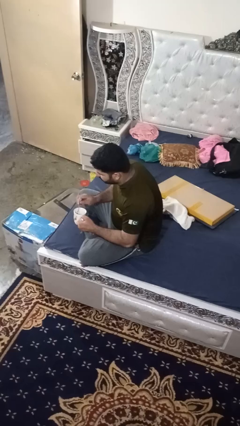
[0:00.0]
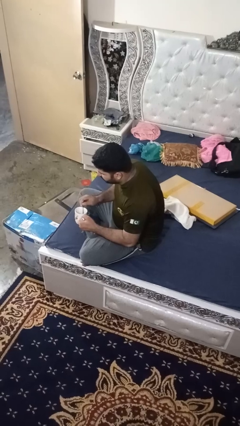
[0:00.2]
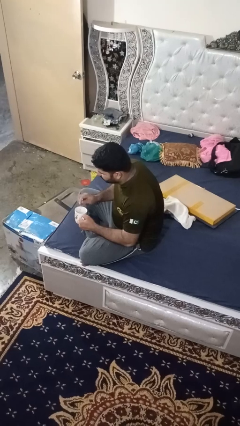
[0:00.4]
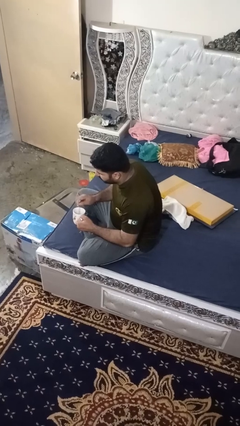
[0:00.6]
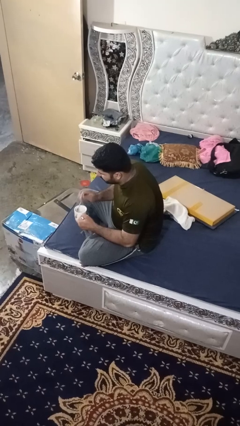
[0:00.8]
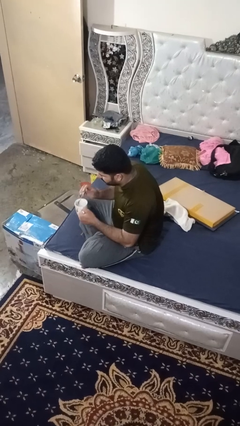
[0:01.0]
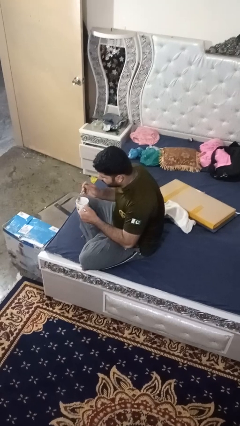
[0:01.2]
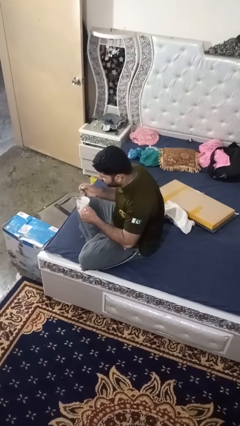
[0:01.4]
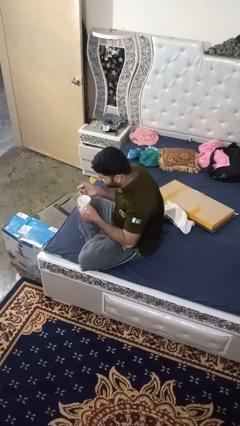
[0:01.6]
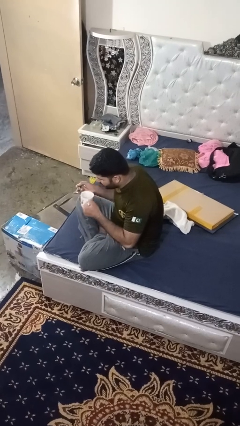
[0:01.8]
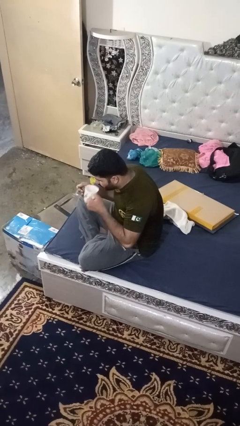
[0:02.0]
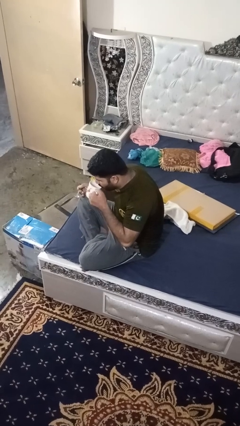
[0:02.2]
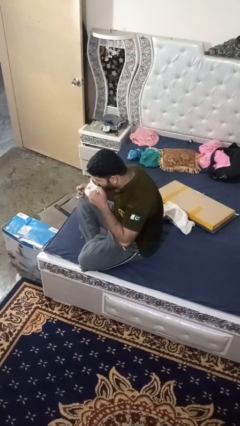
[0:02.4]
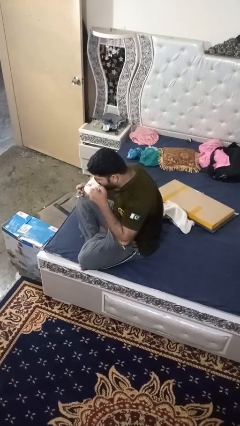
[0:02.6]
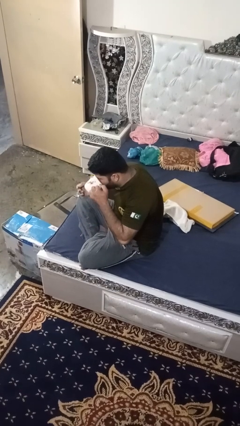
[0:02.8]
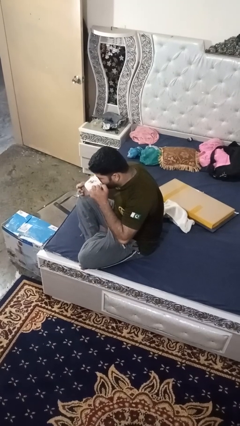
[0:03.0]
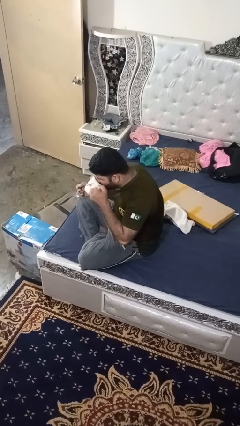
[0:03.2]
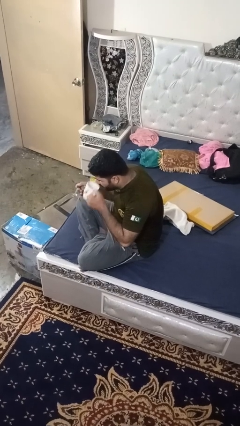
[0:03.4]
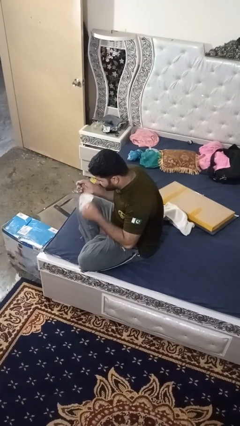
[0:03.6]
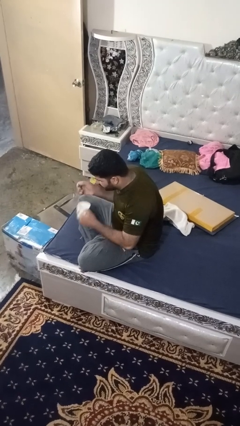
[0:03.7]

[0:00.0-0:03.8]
person drinks from mug

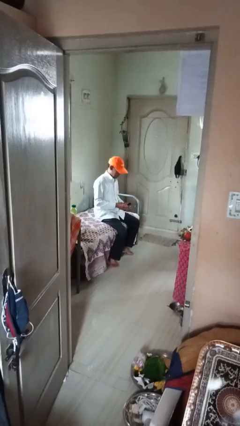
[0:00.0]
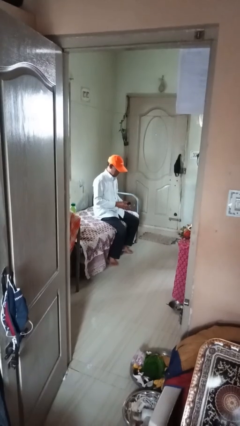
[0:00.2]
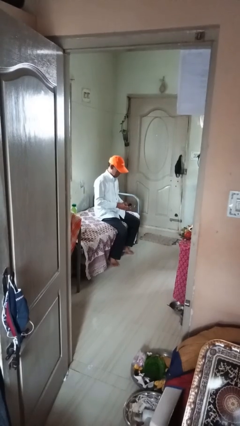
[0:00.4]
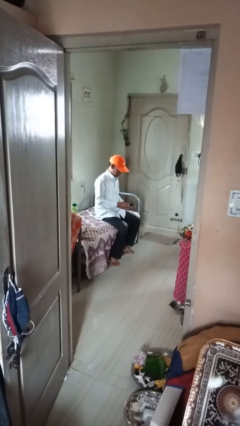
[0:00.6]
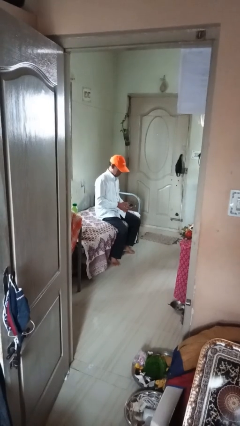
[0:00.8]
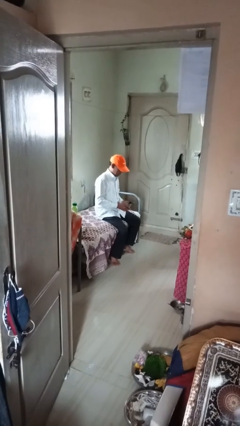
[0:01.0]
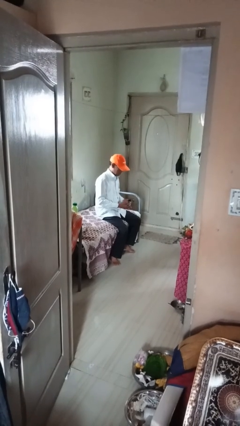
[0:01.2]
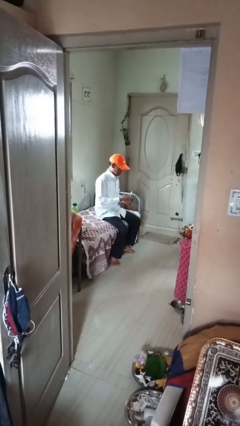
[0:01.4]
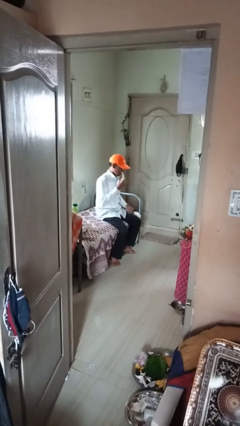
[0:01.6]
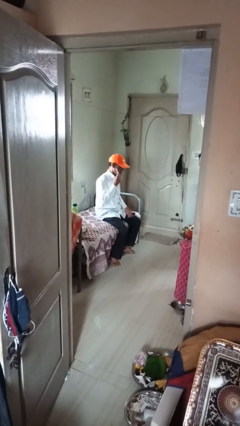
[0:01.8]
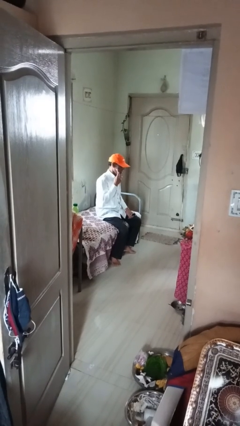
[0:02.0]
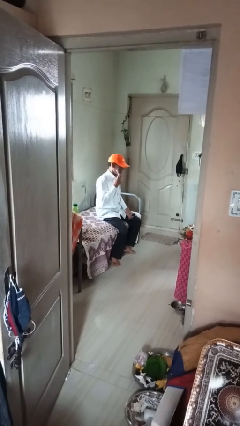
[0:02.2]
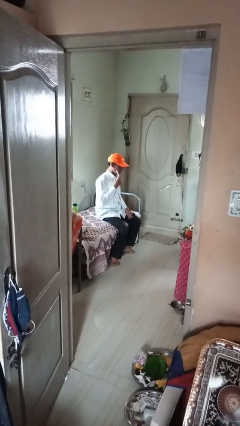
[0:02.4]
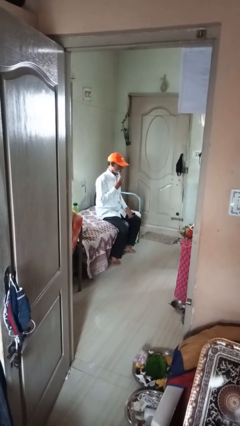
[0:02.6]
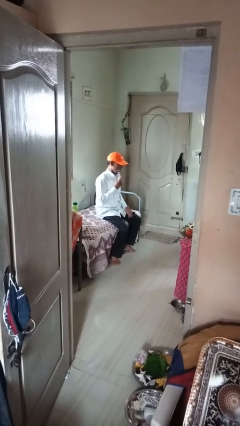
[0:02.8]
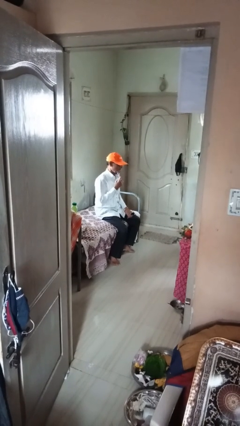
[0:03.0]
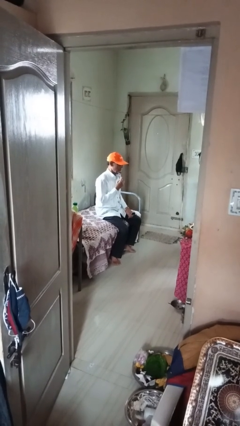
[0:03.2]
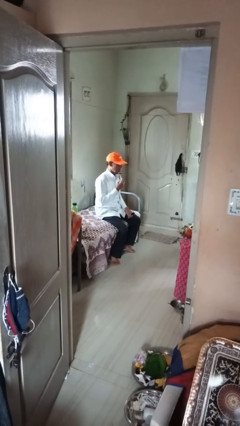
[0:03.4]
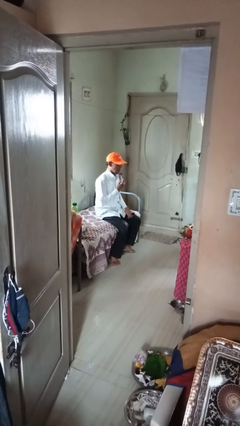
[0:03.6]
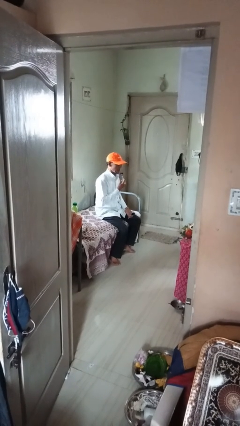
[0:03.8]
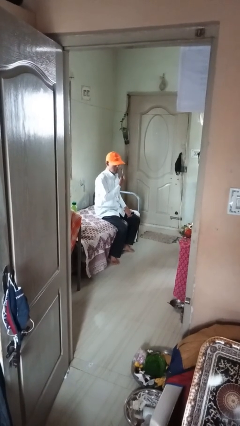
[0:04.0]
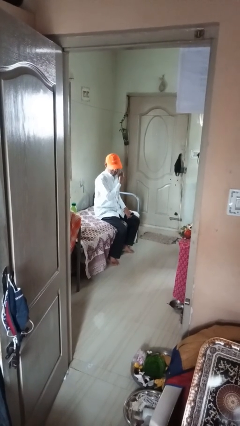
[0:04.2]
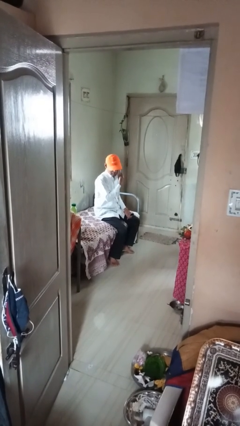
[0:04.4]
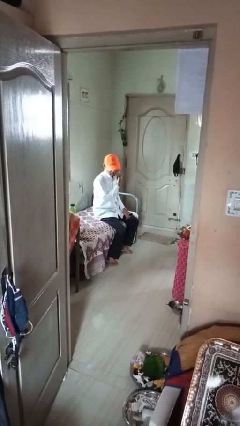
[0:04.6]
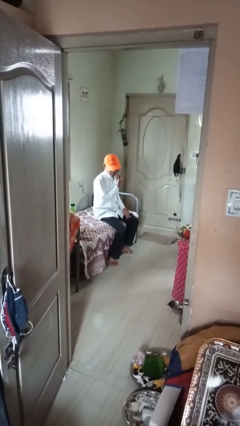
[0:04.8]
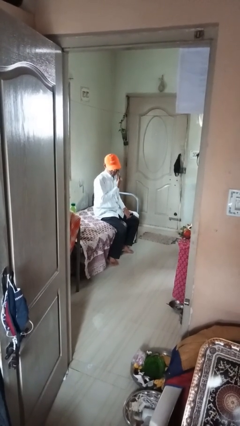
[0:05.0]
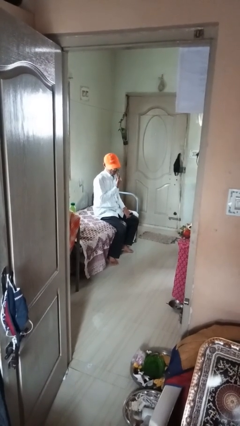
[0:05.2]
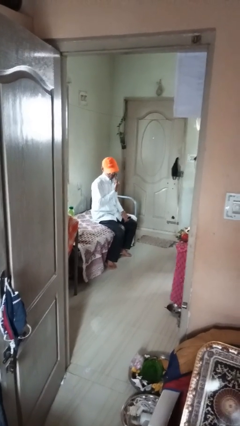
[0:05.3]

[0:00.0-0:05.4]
person shaves face

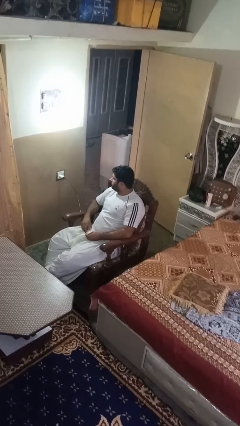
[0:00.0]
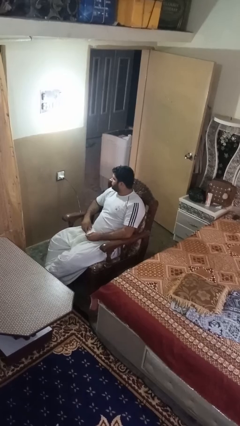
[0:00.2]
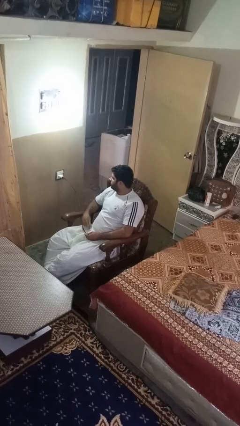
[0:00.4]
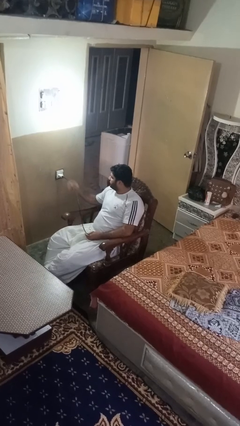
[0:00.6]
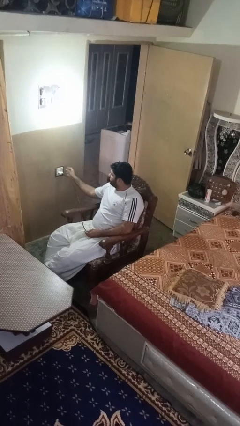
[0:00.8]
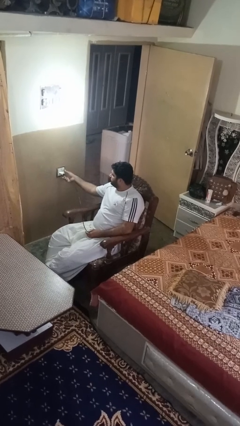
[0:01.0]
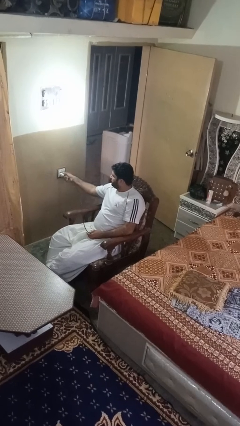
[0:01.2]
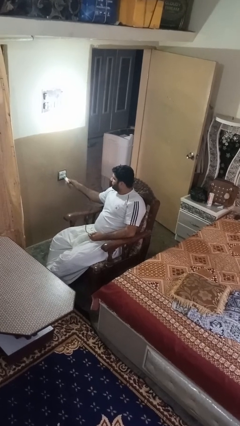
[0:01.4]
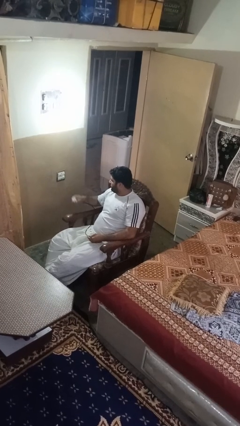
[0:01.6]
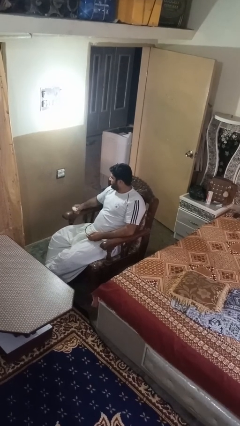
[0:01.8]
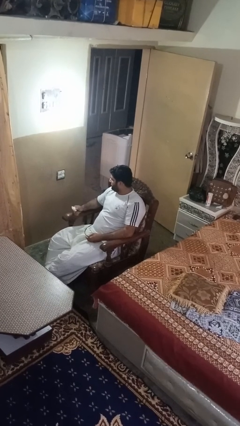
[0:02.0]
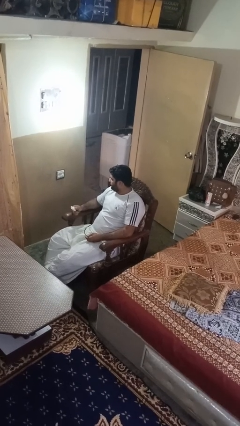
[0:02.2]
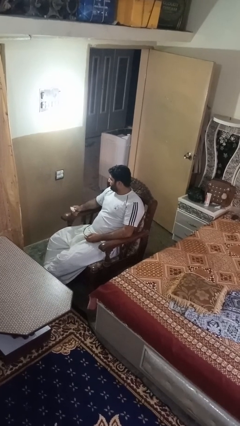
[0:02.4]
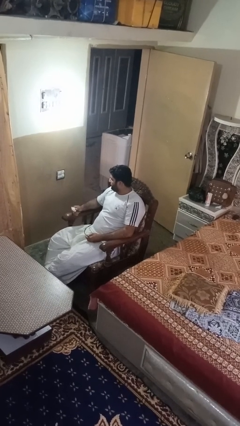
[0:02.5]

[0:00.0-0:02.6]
person unplugs from electrical socket

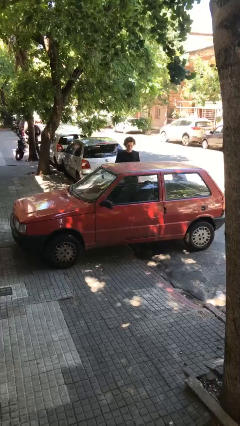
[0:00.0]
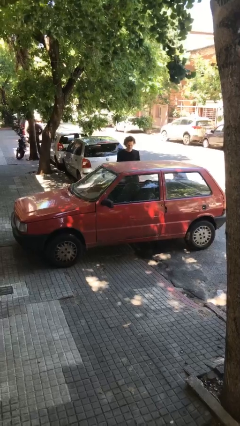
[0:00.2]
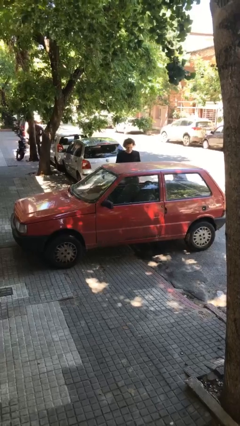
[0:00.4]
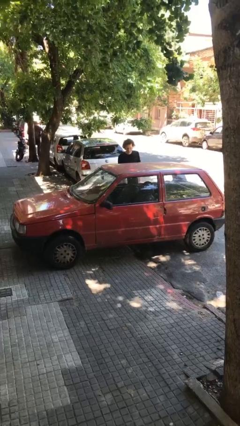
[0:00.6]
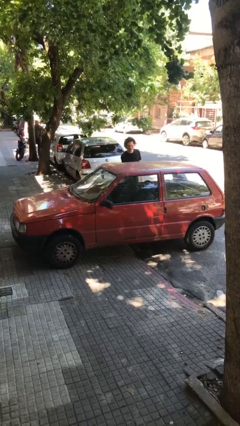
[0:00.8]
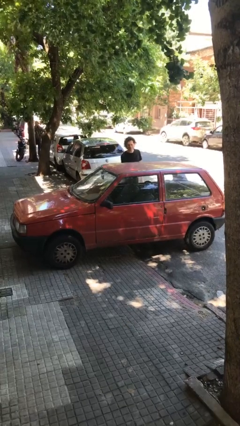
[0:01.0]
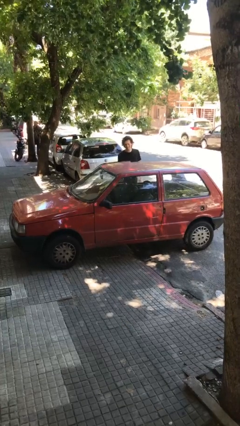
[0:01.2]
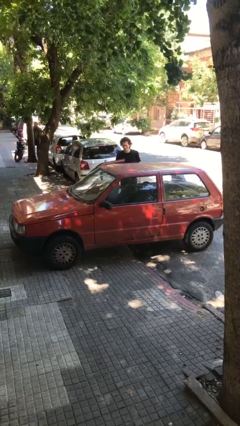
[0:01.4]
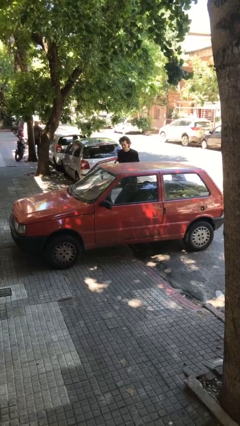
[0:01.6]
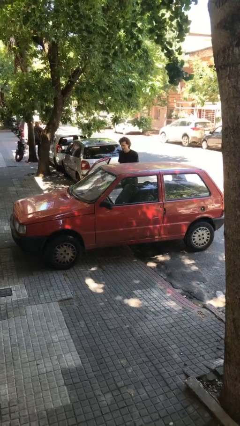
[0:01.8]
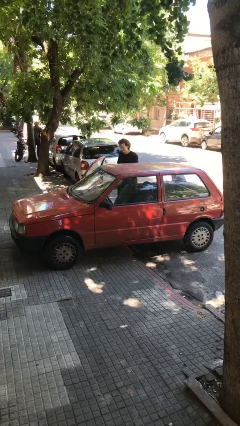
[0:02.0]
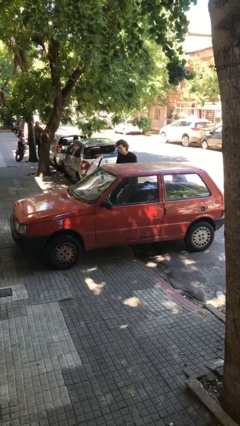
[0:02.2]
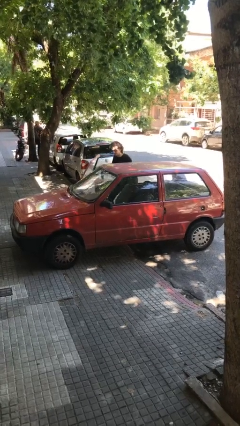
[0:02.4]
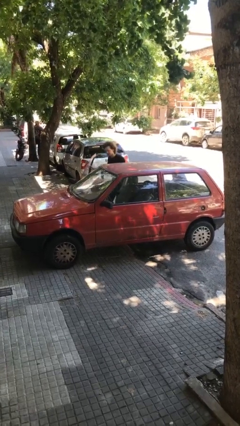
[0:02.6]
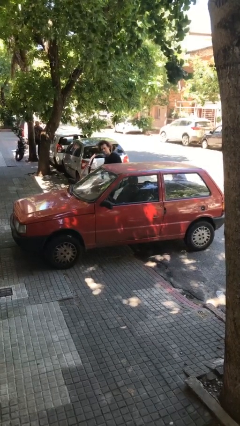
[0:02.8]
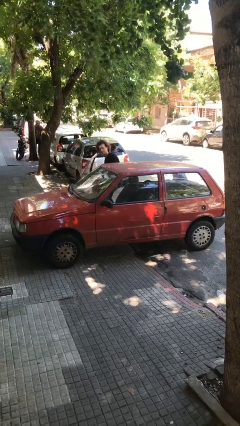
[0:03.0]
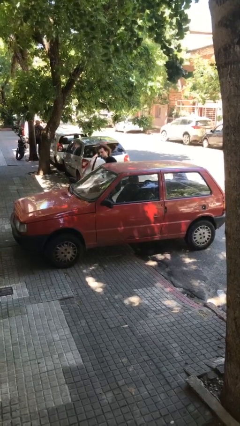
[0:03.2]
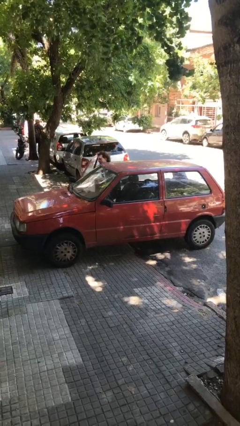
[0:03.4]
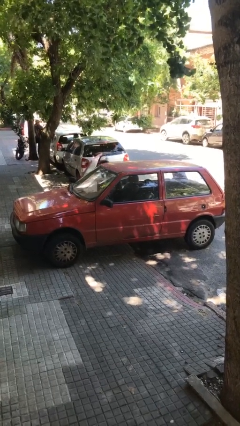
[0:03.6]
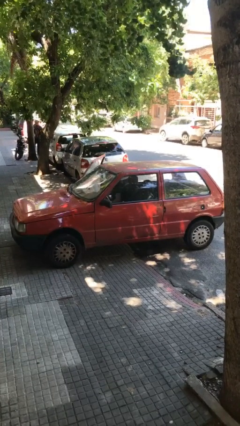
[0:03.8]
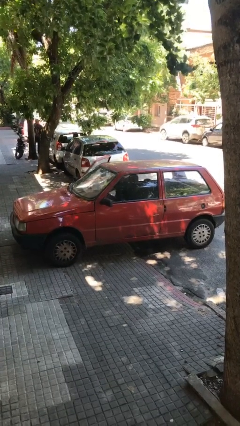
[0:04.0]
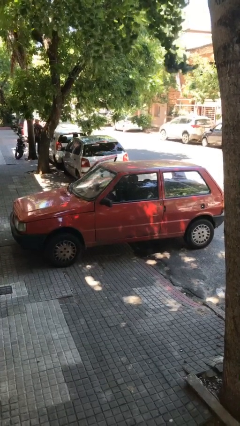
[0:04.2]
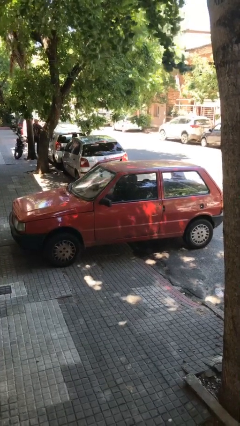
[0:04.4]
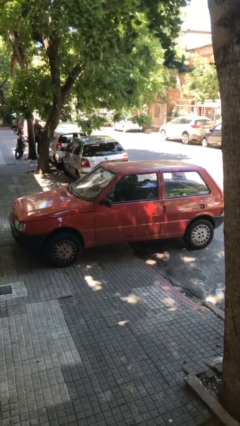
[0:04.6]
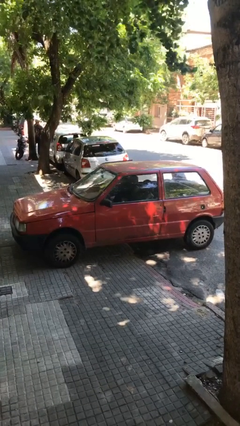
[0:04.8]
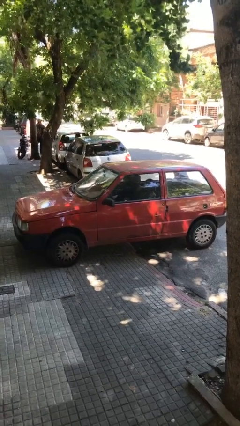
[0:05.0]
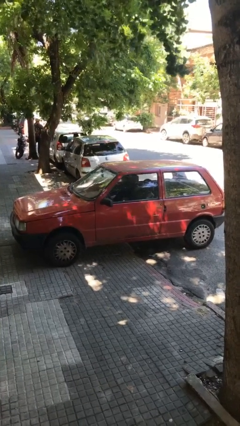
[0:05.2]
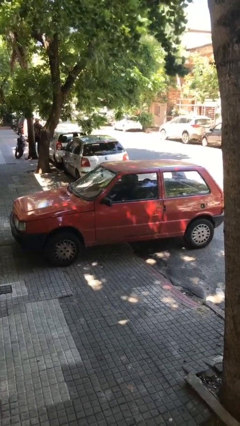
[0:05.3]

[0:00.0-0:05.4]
car picks up person

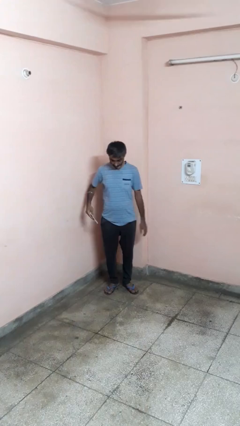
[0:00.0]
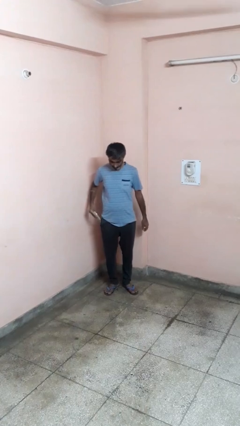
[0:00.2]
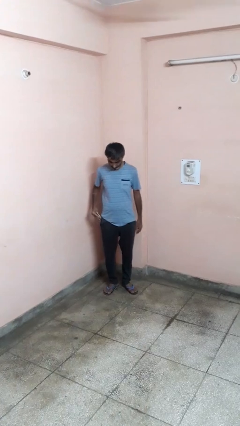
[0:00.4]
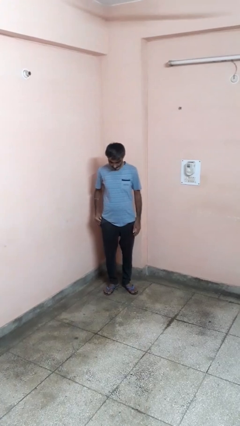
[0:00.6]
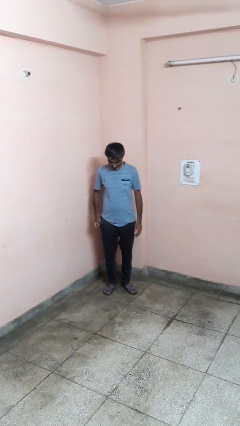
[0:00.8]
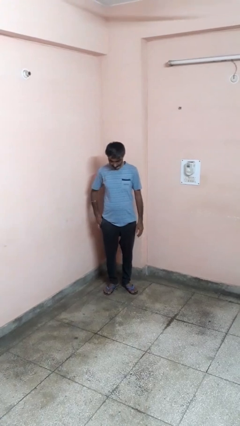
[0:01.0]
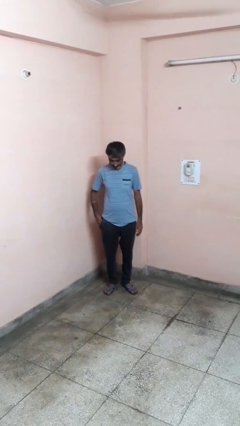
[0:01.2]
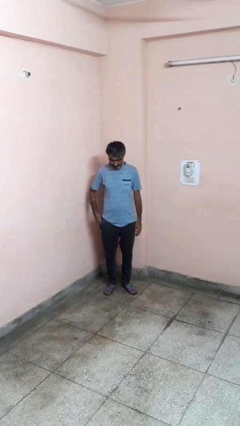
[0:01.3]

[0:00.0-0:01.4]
person puts phone into pocket
